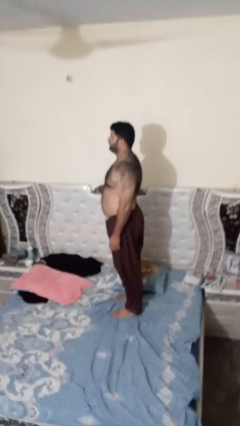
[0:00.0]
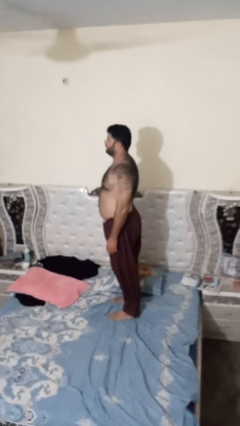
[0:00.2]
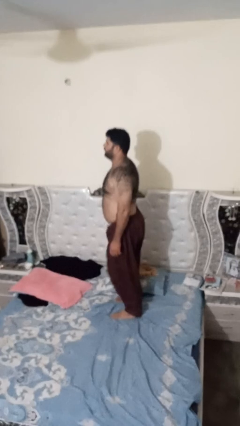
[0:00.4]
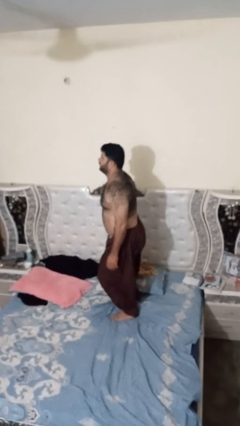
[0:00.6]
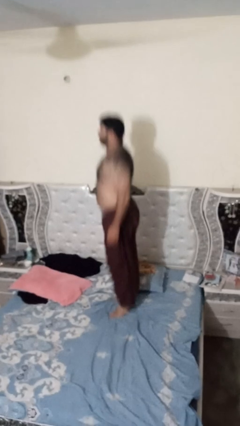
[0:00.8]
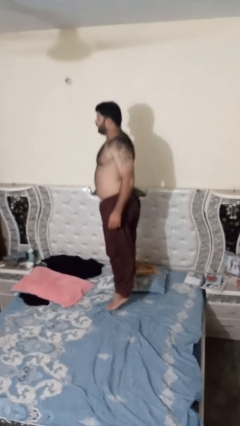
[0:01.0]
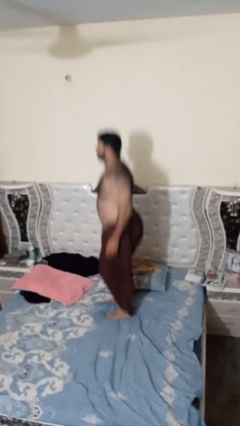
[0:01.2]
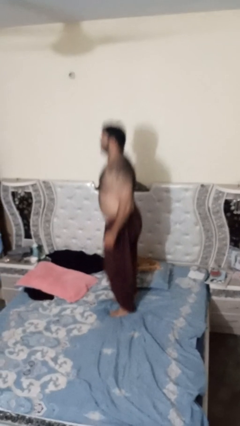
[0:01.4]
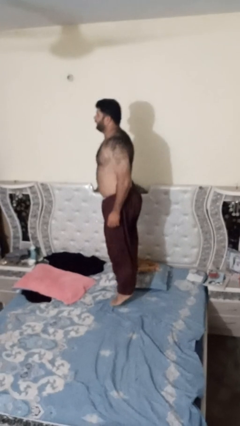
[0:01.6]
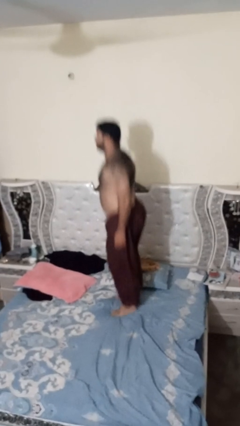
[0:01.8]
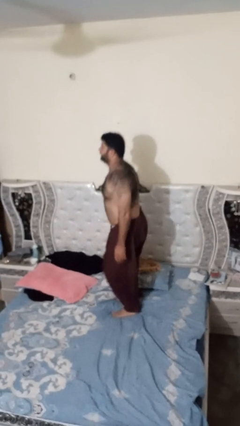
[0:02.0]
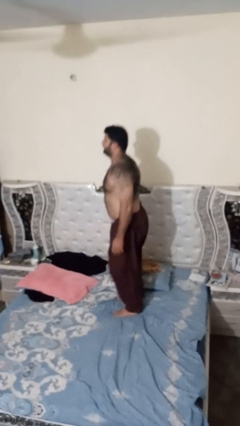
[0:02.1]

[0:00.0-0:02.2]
person jumps on bed

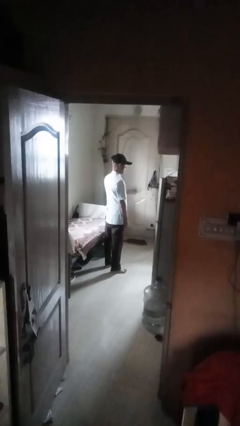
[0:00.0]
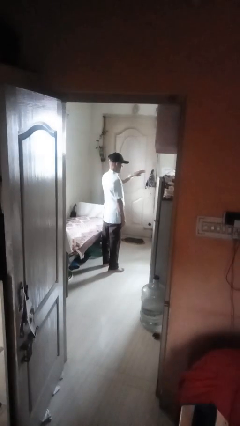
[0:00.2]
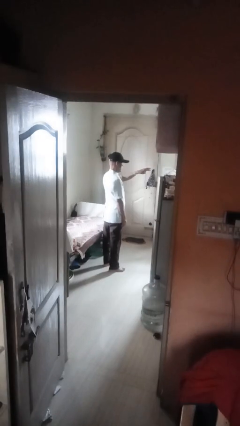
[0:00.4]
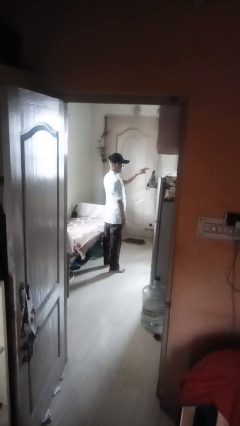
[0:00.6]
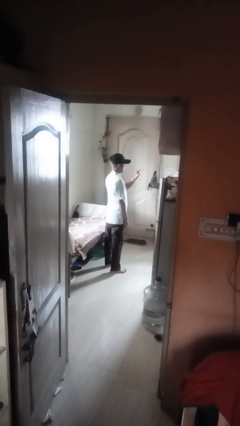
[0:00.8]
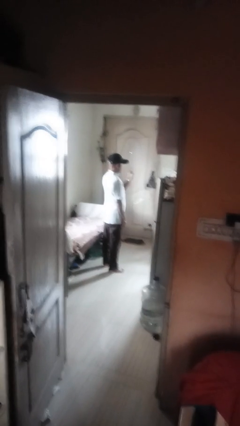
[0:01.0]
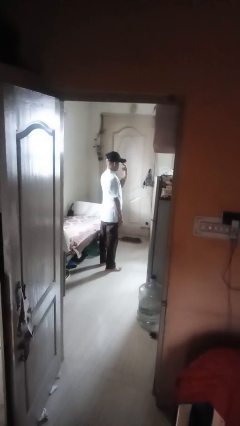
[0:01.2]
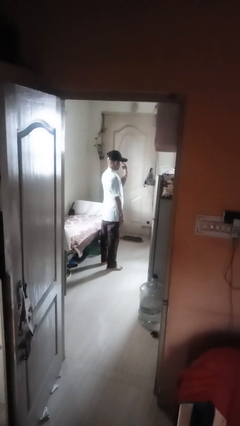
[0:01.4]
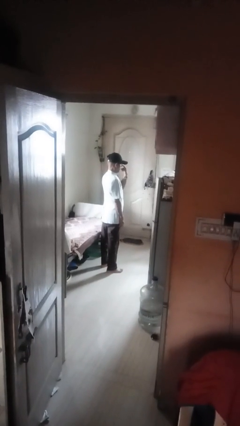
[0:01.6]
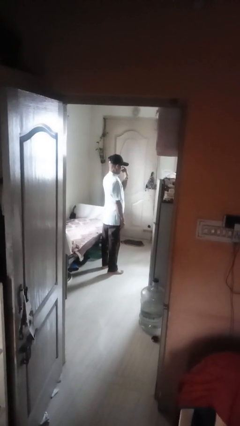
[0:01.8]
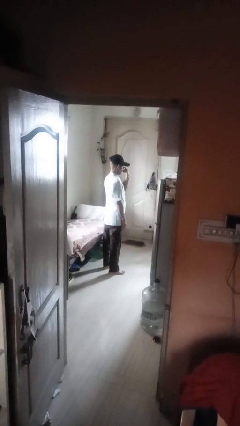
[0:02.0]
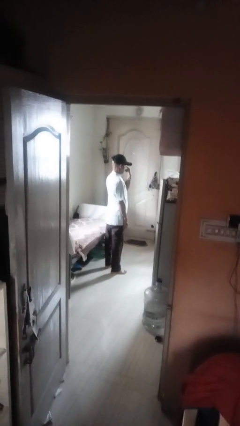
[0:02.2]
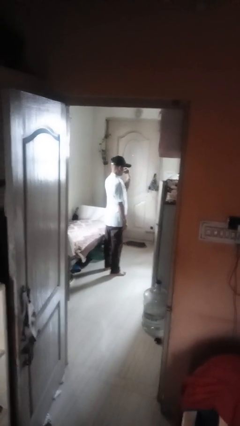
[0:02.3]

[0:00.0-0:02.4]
person gestures watch closely

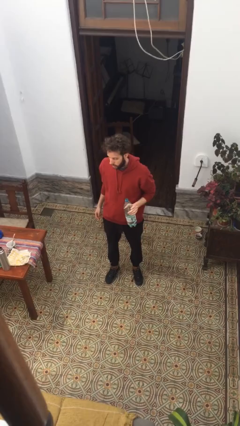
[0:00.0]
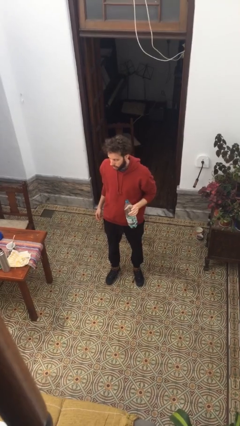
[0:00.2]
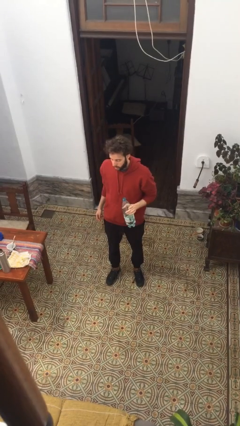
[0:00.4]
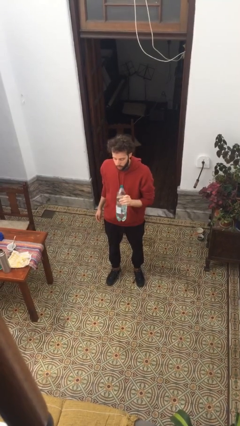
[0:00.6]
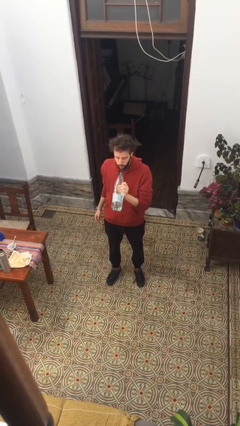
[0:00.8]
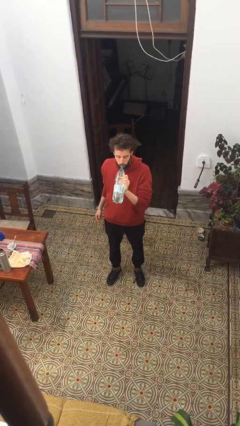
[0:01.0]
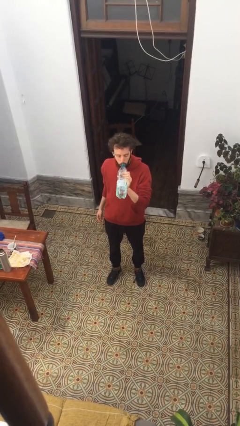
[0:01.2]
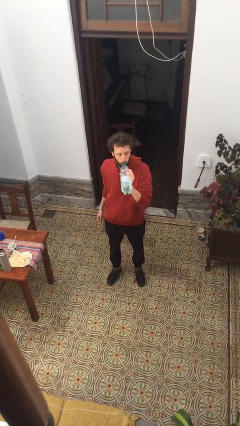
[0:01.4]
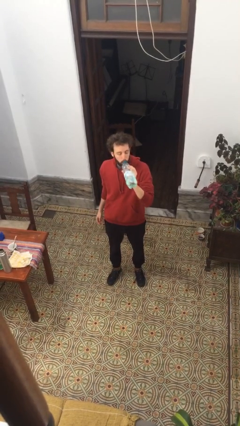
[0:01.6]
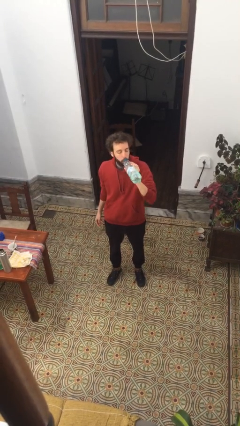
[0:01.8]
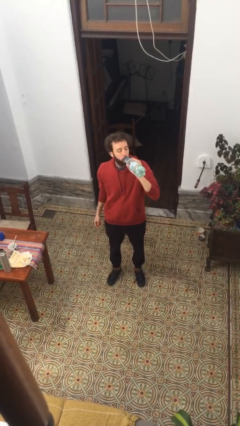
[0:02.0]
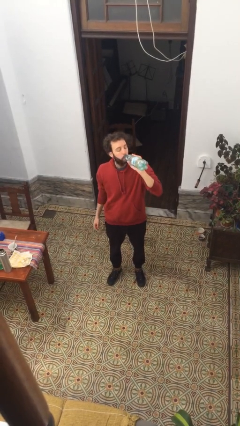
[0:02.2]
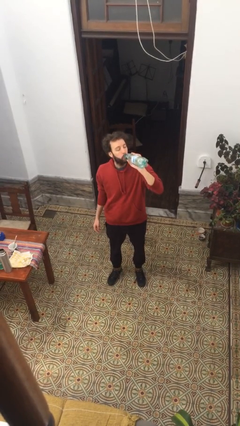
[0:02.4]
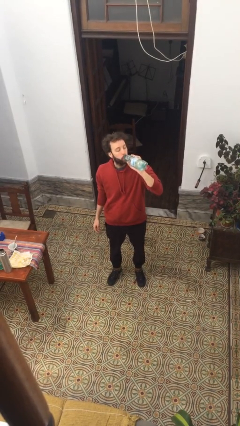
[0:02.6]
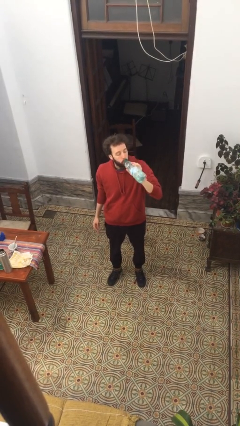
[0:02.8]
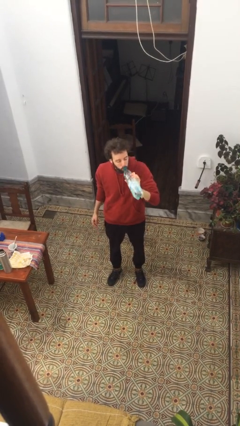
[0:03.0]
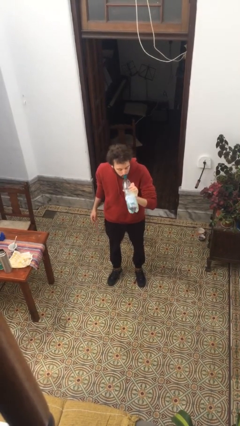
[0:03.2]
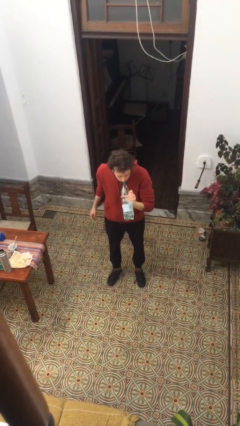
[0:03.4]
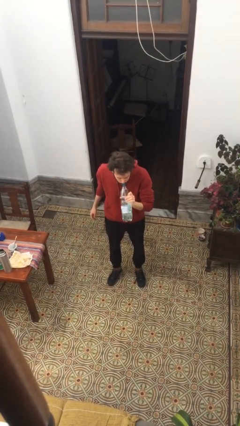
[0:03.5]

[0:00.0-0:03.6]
person drinks from bottle

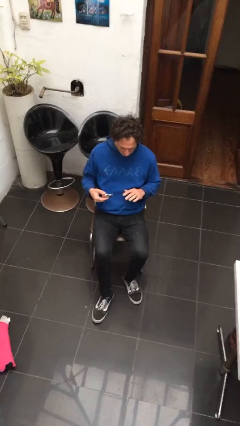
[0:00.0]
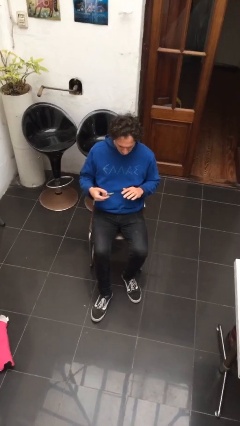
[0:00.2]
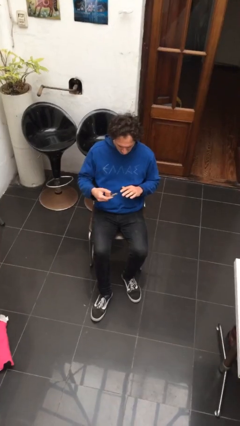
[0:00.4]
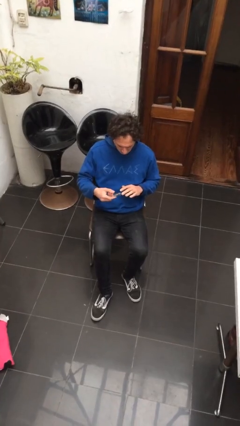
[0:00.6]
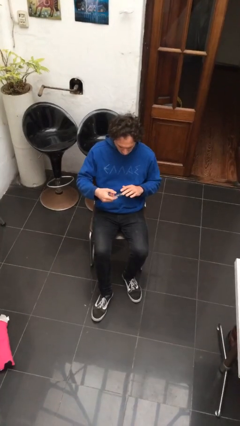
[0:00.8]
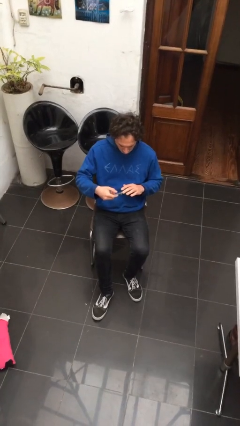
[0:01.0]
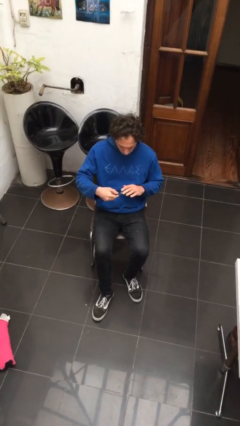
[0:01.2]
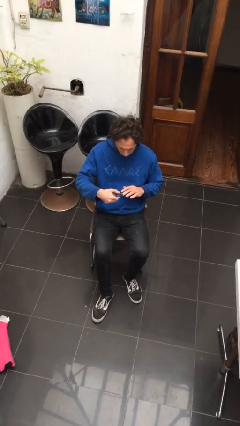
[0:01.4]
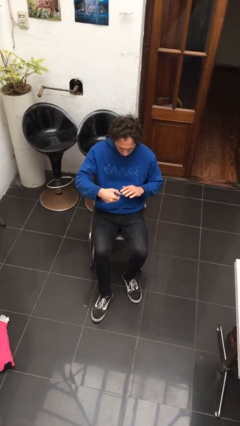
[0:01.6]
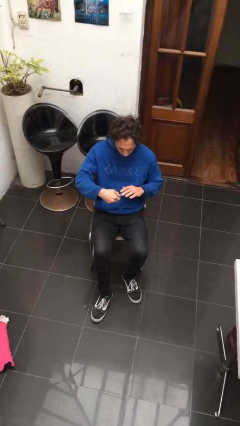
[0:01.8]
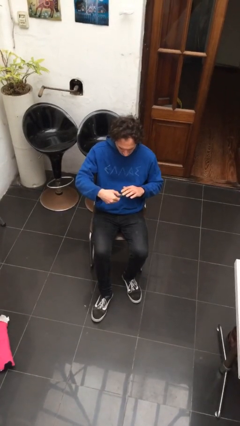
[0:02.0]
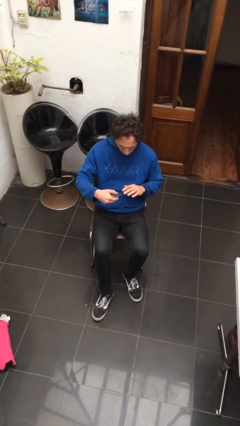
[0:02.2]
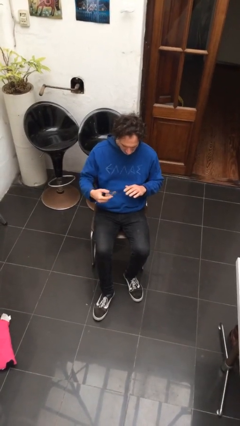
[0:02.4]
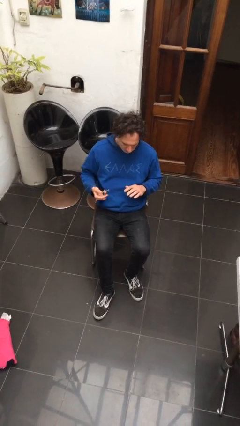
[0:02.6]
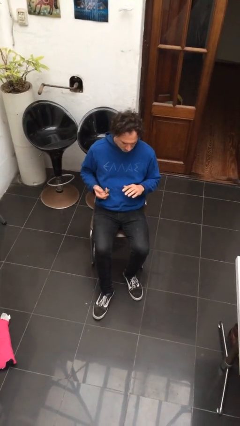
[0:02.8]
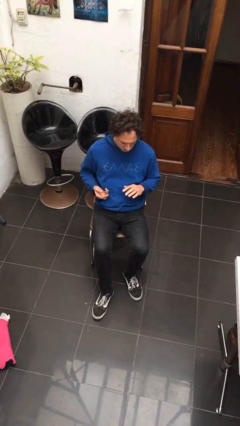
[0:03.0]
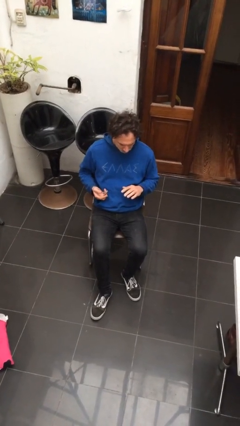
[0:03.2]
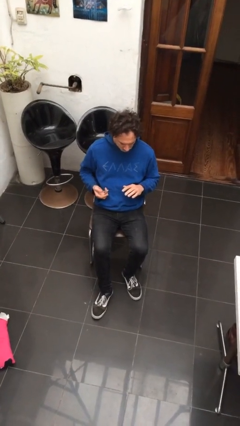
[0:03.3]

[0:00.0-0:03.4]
person clips fingernails

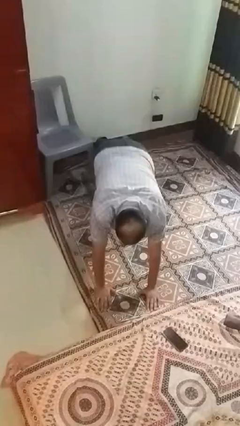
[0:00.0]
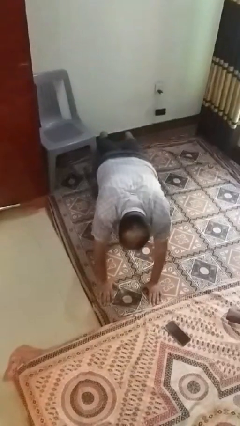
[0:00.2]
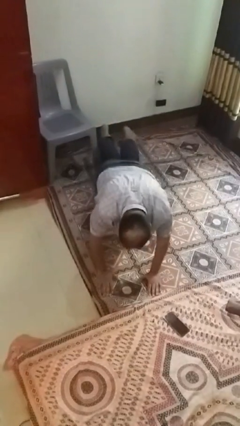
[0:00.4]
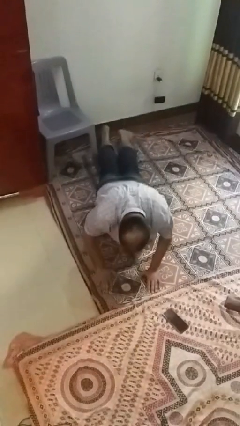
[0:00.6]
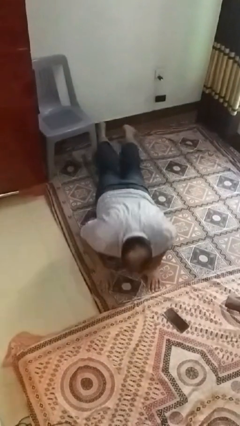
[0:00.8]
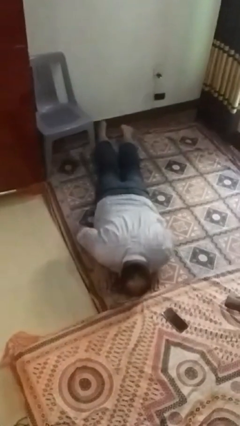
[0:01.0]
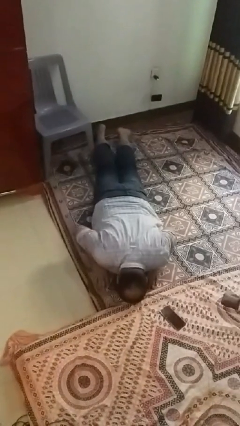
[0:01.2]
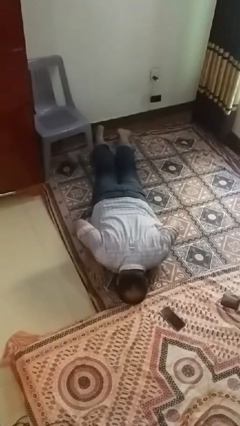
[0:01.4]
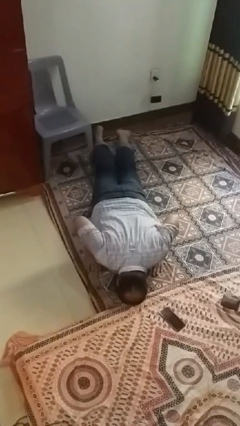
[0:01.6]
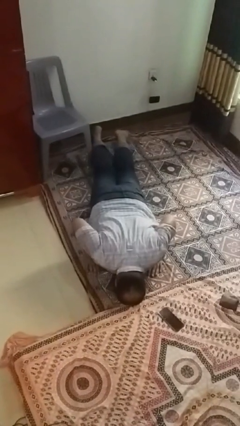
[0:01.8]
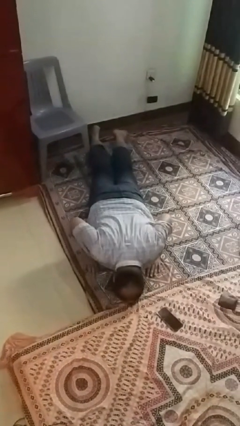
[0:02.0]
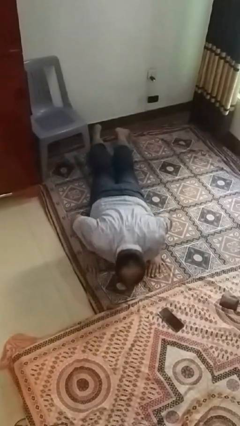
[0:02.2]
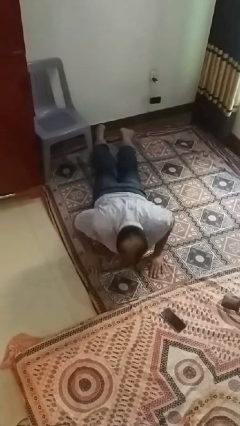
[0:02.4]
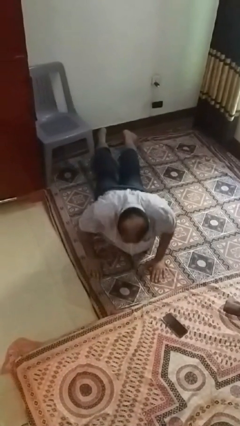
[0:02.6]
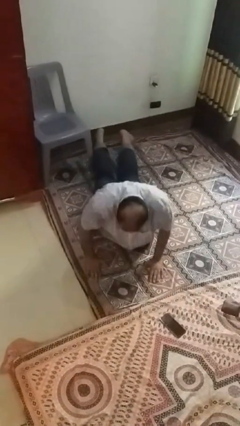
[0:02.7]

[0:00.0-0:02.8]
person exercises with pushup

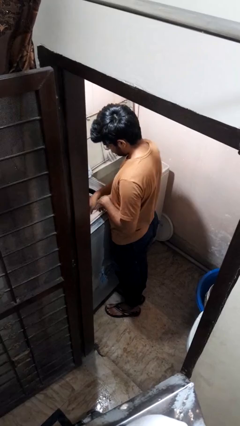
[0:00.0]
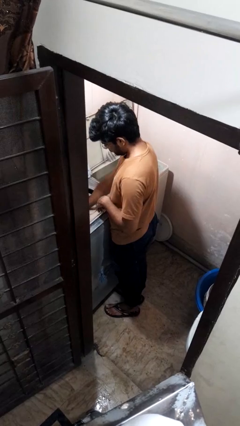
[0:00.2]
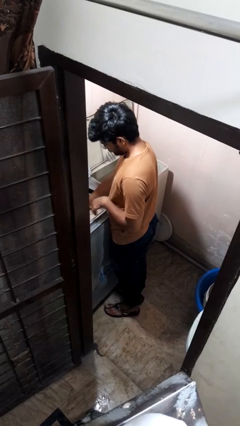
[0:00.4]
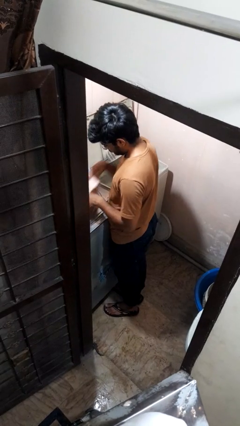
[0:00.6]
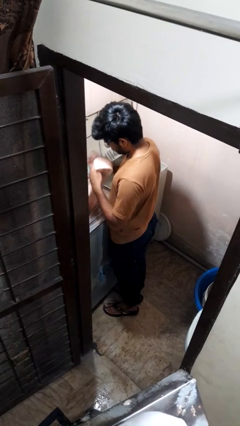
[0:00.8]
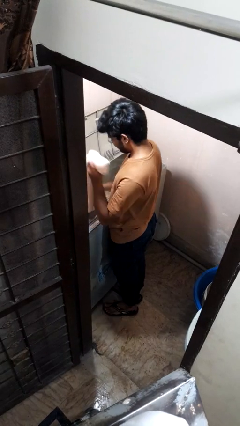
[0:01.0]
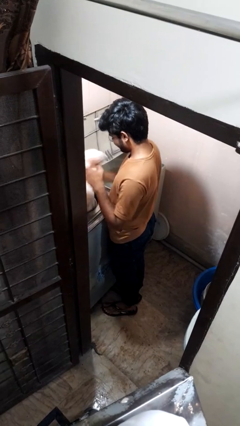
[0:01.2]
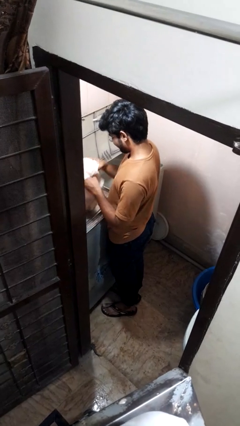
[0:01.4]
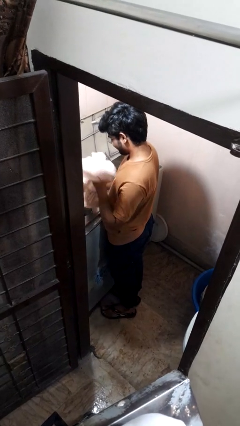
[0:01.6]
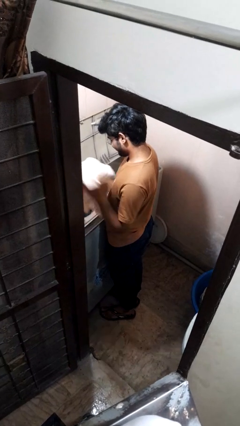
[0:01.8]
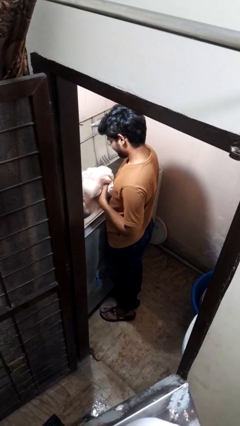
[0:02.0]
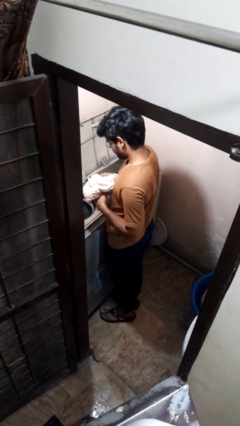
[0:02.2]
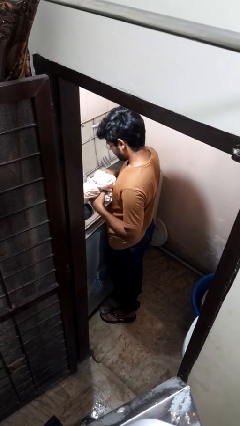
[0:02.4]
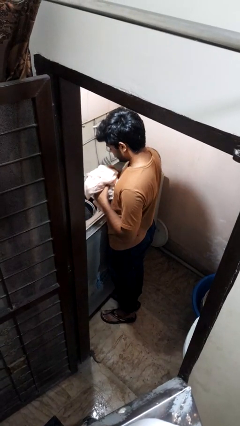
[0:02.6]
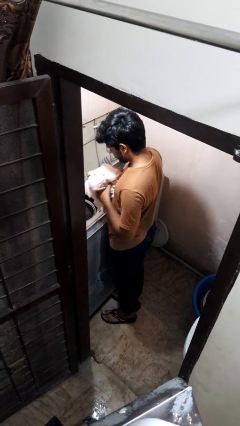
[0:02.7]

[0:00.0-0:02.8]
person unloads dryer
